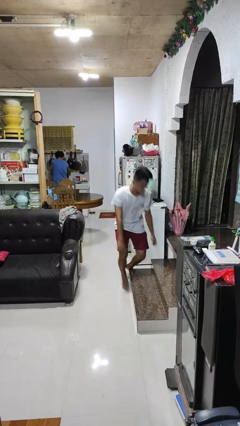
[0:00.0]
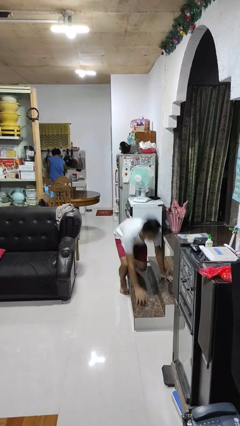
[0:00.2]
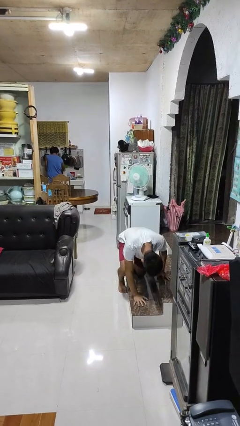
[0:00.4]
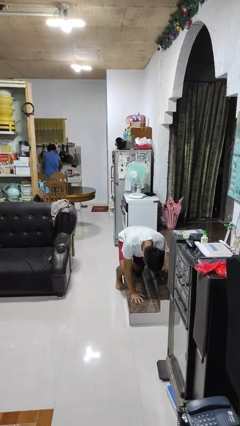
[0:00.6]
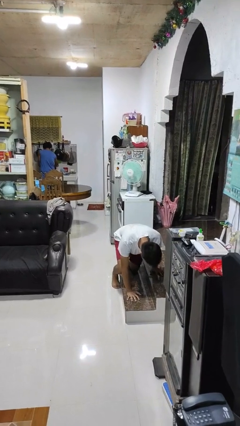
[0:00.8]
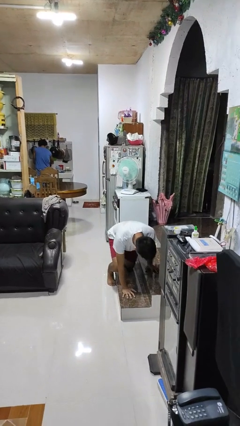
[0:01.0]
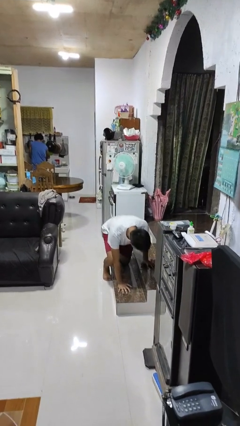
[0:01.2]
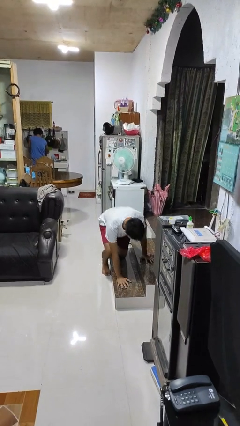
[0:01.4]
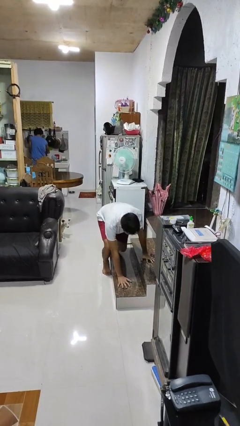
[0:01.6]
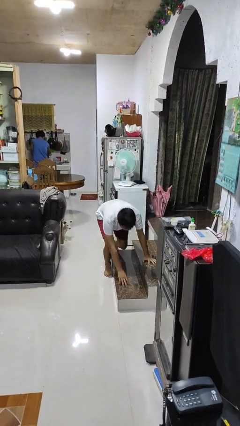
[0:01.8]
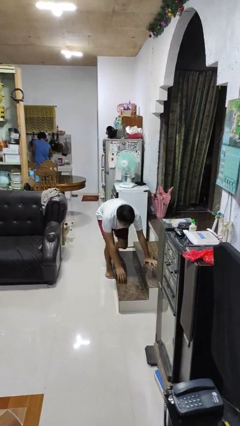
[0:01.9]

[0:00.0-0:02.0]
person trips on object on floor

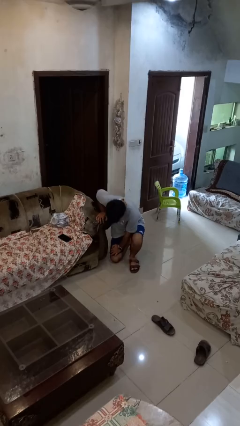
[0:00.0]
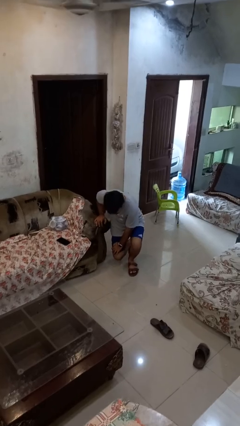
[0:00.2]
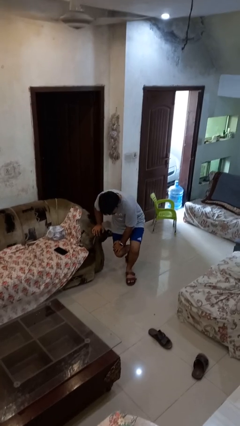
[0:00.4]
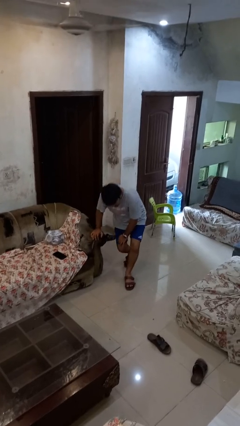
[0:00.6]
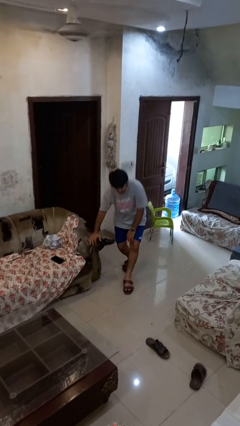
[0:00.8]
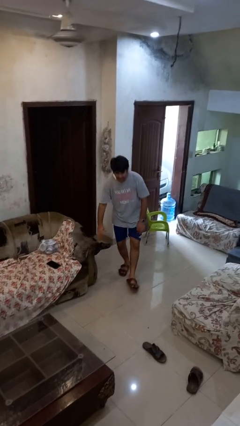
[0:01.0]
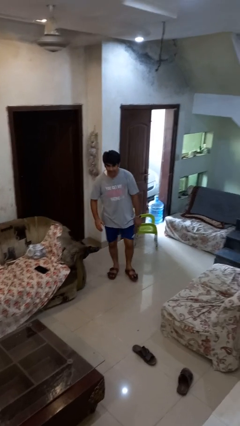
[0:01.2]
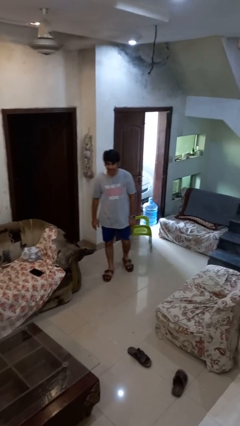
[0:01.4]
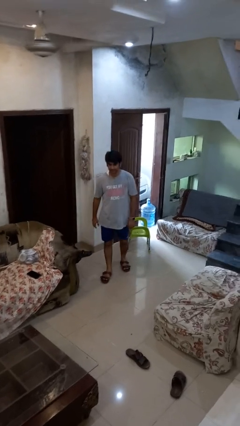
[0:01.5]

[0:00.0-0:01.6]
person stands up from floor

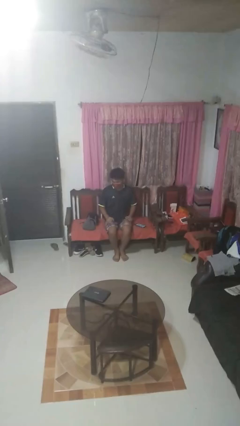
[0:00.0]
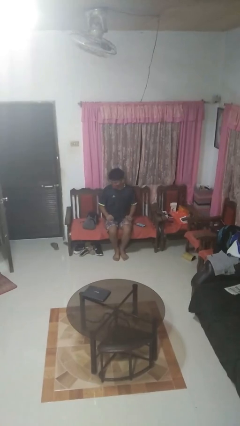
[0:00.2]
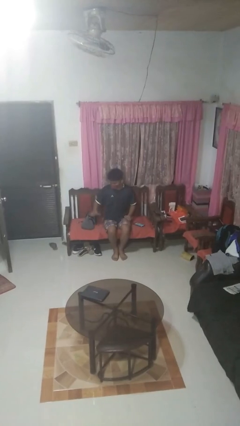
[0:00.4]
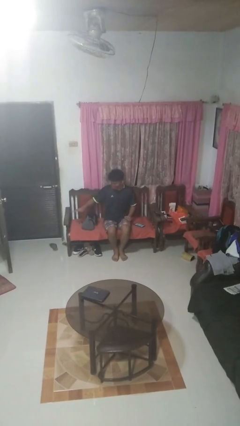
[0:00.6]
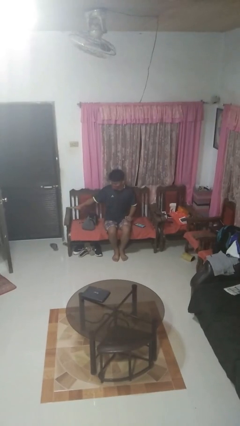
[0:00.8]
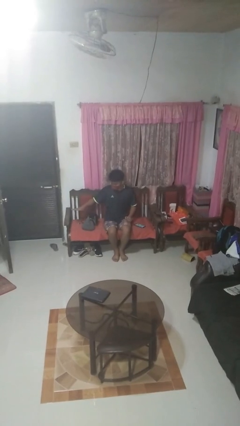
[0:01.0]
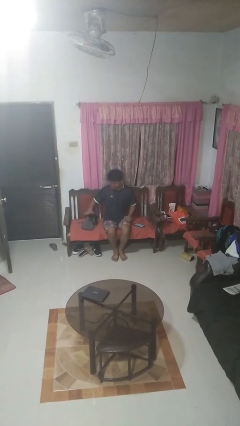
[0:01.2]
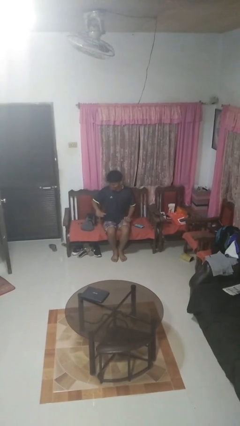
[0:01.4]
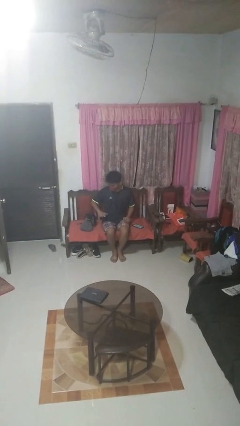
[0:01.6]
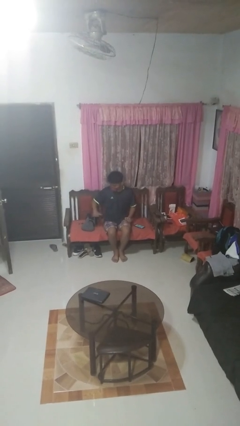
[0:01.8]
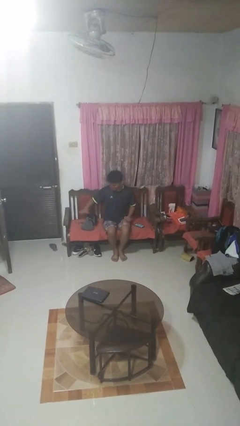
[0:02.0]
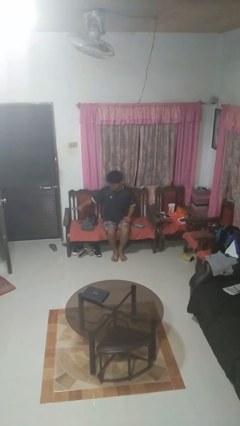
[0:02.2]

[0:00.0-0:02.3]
person waves hand over object

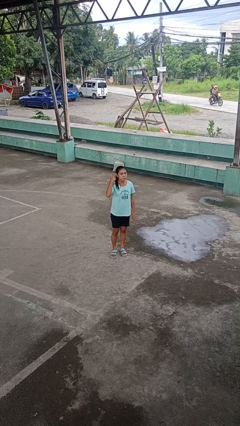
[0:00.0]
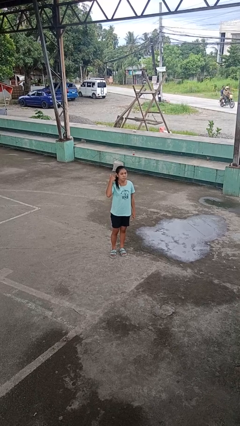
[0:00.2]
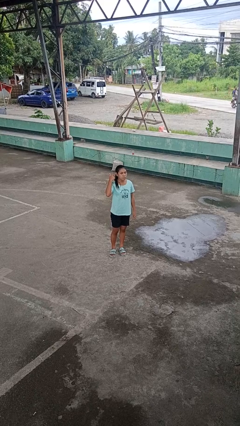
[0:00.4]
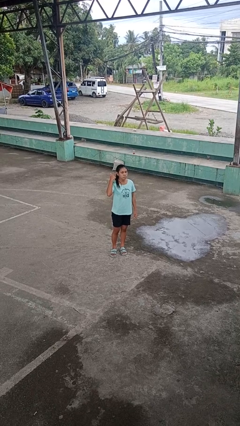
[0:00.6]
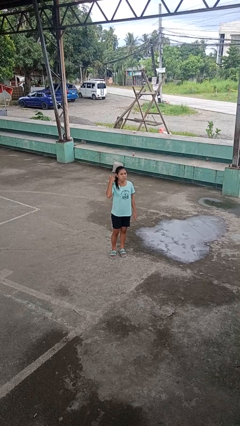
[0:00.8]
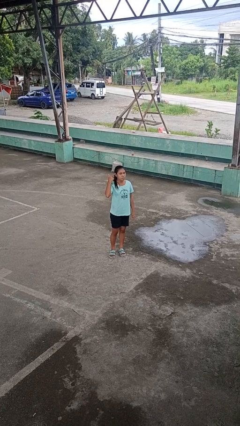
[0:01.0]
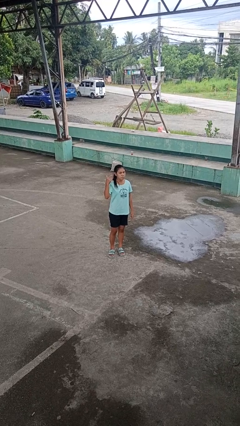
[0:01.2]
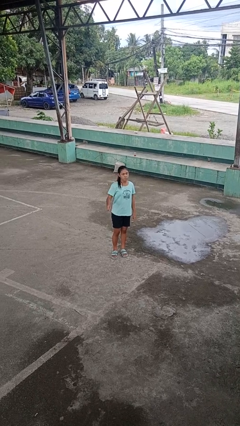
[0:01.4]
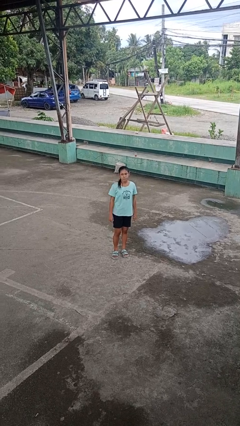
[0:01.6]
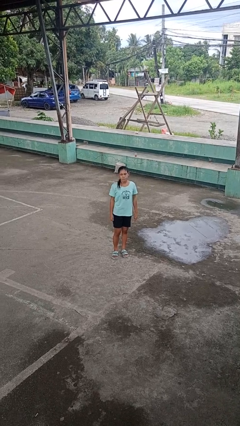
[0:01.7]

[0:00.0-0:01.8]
person gestures listen closely

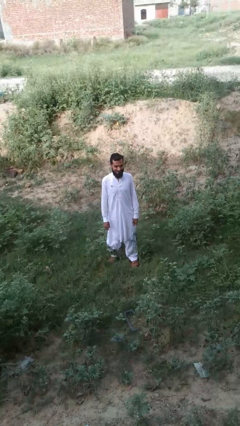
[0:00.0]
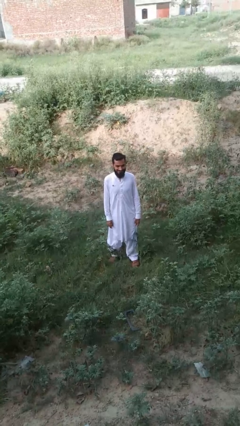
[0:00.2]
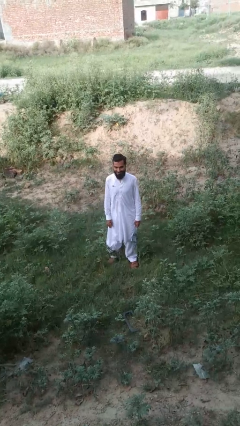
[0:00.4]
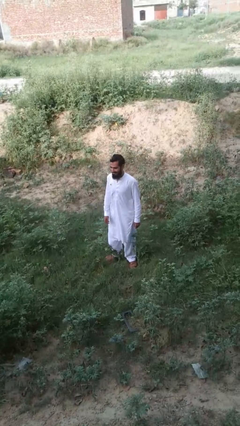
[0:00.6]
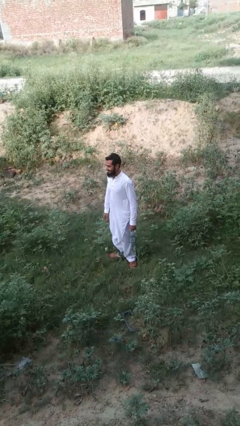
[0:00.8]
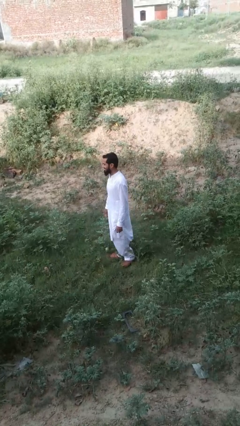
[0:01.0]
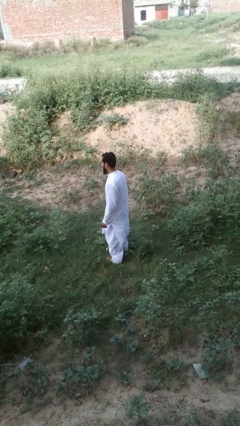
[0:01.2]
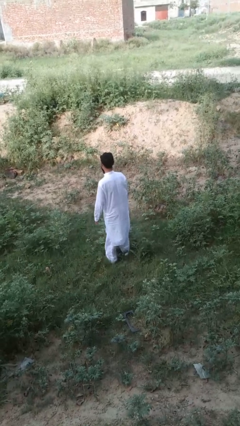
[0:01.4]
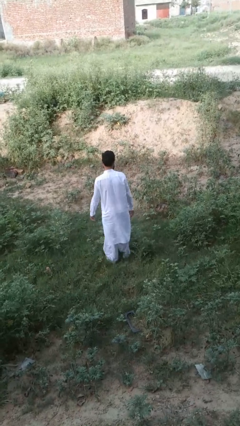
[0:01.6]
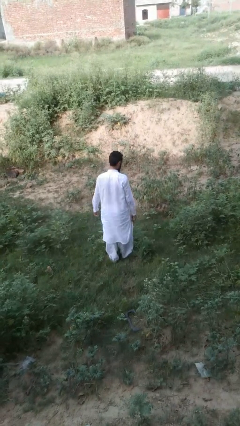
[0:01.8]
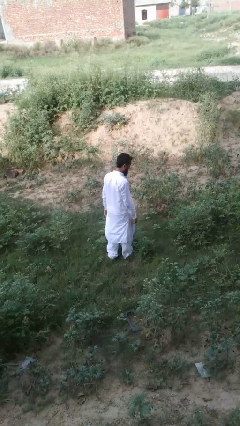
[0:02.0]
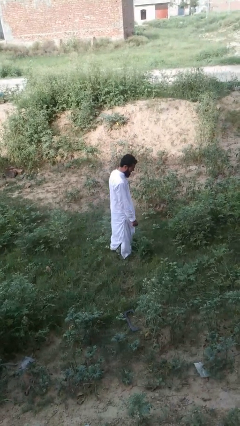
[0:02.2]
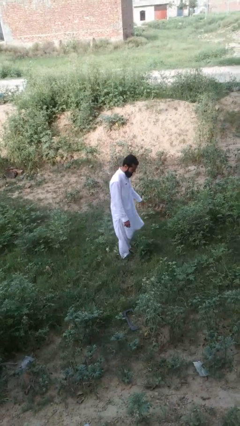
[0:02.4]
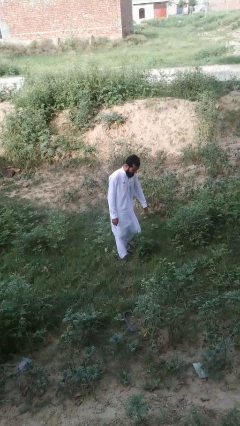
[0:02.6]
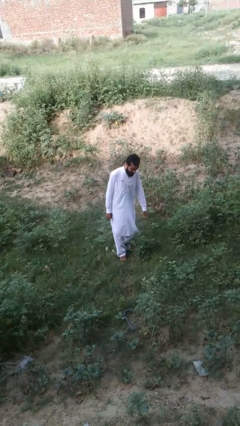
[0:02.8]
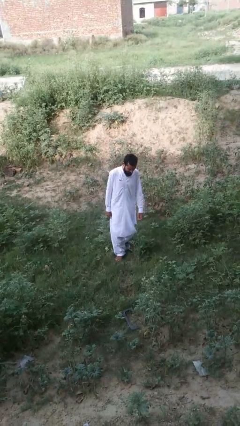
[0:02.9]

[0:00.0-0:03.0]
person twirls

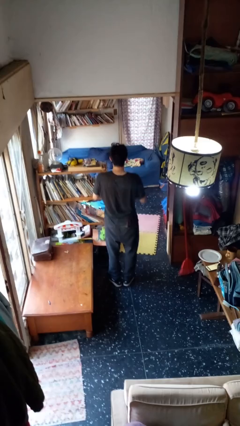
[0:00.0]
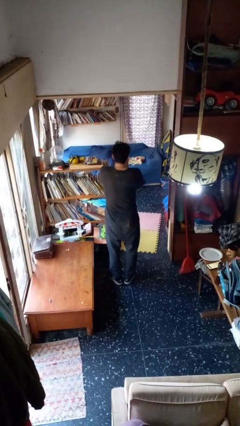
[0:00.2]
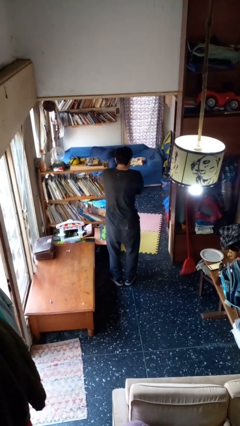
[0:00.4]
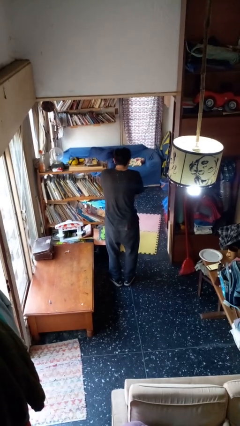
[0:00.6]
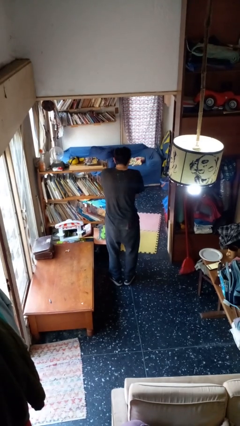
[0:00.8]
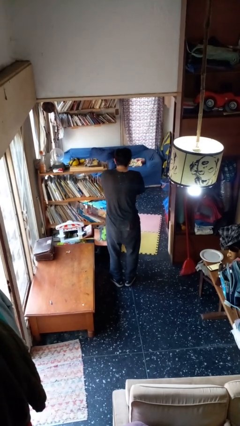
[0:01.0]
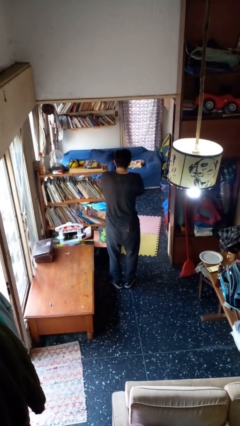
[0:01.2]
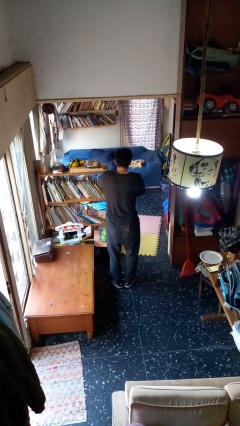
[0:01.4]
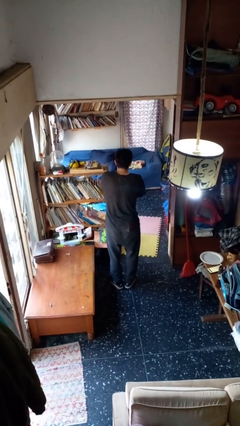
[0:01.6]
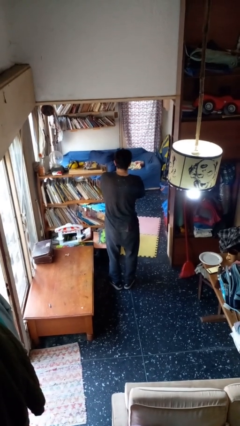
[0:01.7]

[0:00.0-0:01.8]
person sneezes into hand

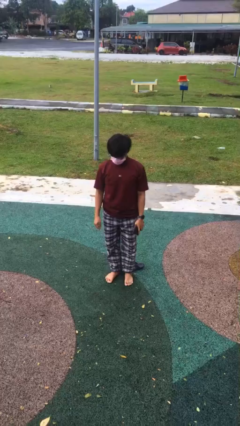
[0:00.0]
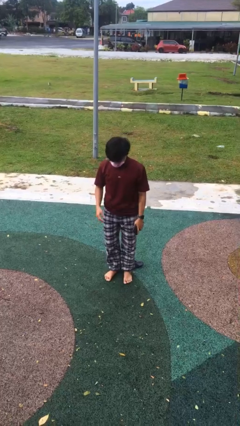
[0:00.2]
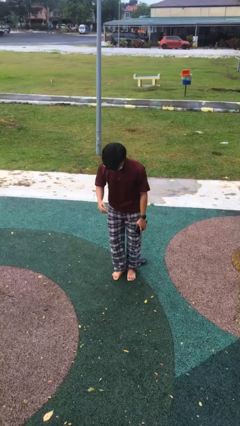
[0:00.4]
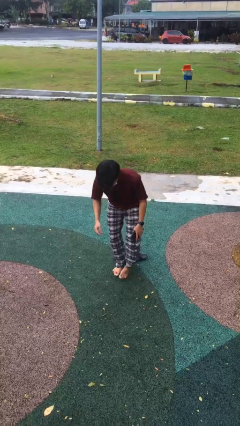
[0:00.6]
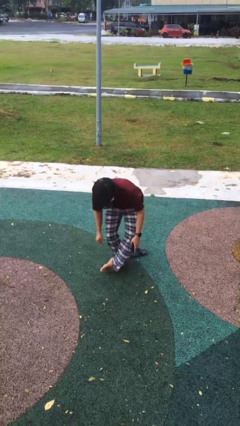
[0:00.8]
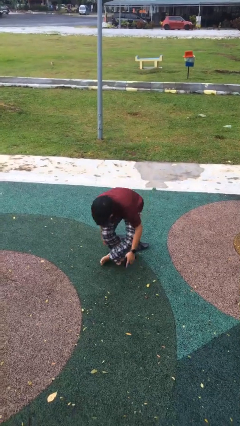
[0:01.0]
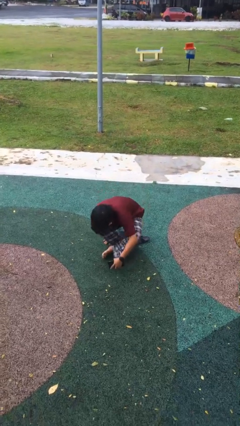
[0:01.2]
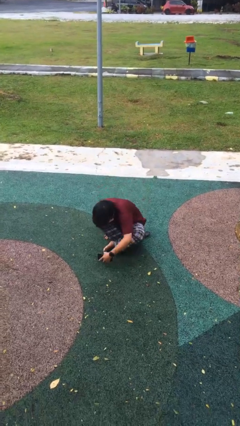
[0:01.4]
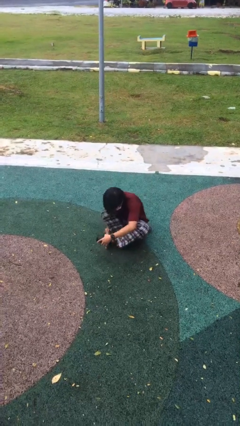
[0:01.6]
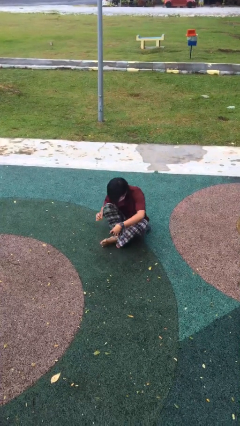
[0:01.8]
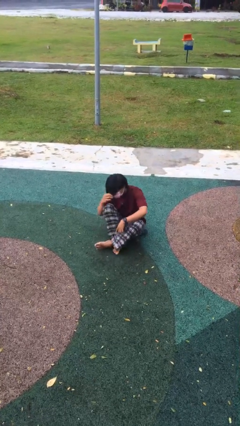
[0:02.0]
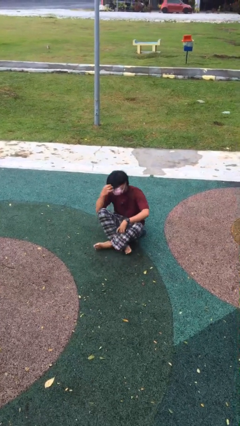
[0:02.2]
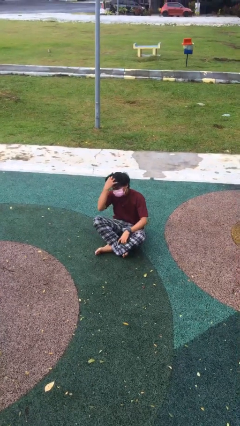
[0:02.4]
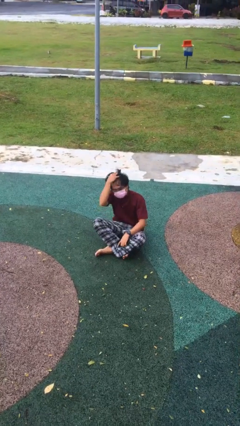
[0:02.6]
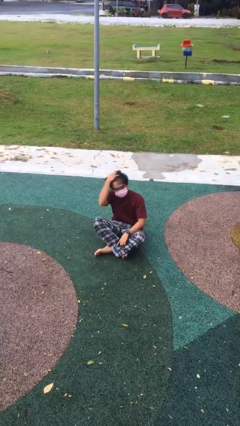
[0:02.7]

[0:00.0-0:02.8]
person sits crisscross

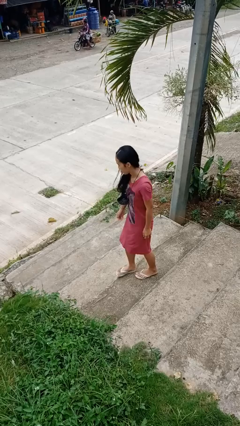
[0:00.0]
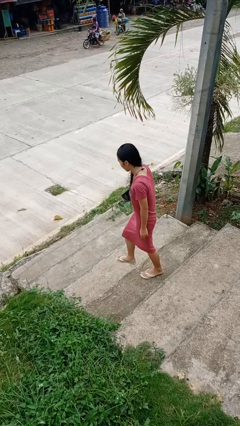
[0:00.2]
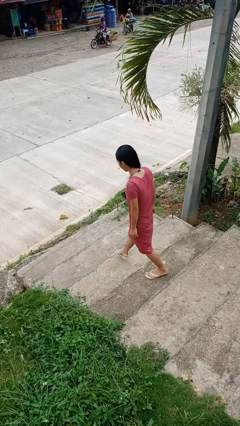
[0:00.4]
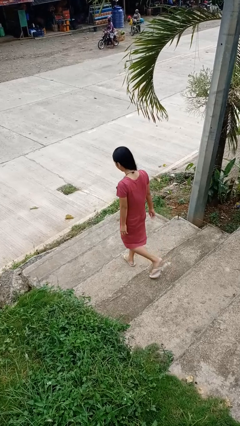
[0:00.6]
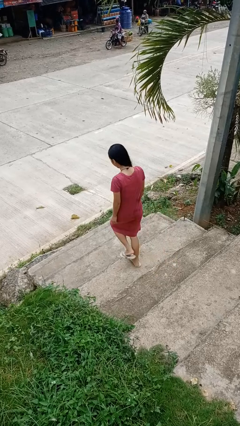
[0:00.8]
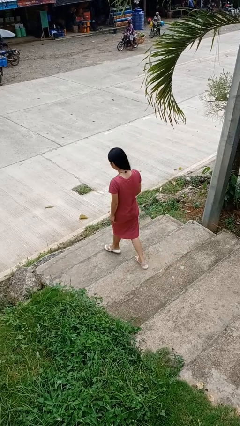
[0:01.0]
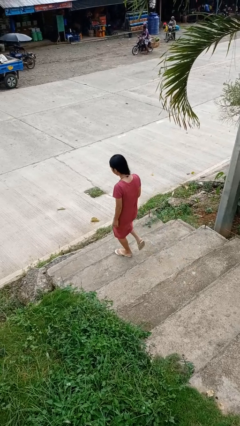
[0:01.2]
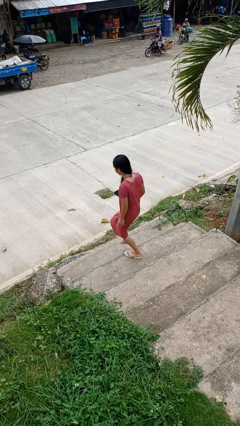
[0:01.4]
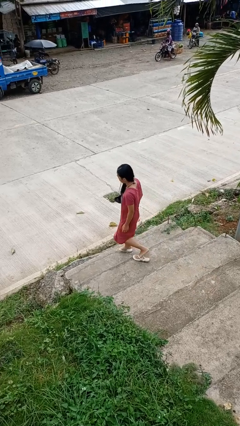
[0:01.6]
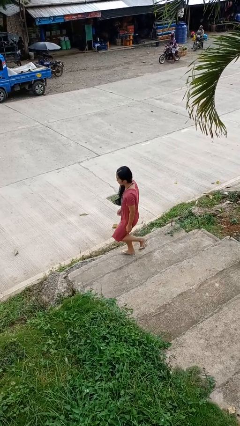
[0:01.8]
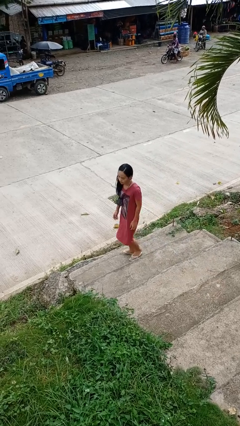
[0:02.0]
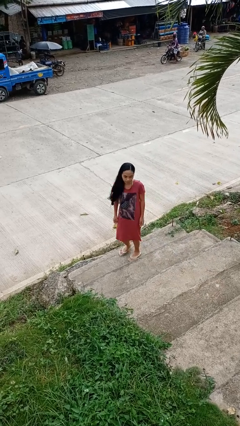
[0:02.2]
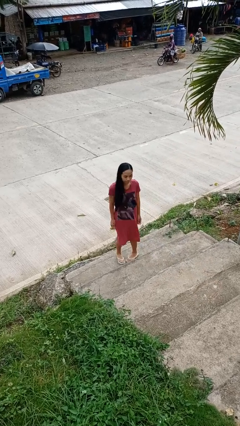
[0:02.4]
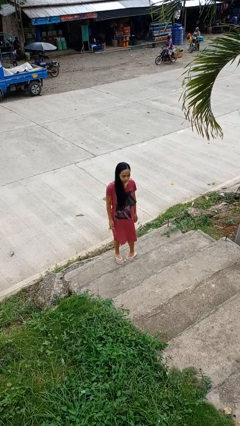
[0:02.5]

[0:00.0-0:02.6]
person climbs down stairs
